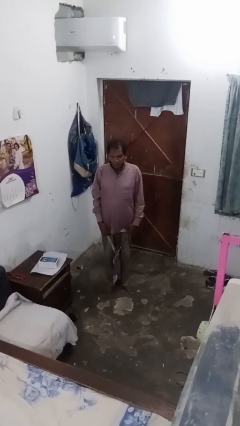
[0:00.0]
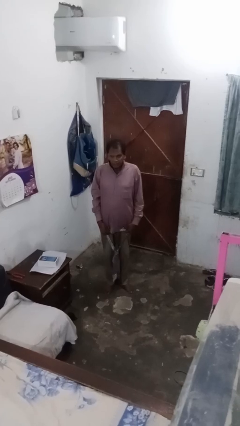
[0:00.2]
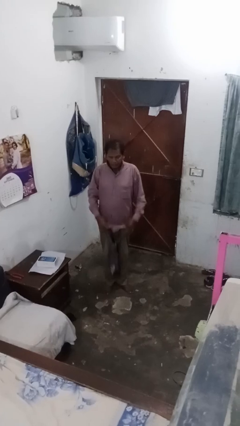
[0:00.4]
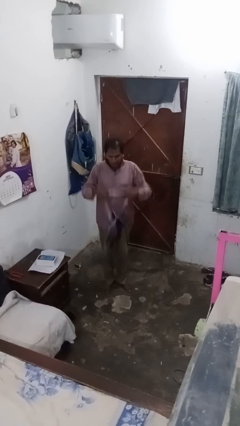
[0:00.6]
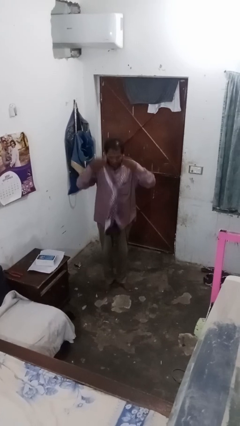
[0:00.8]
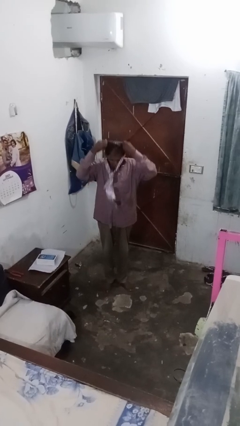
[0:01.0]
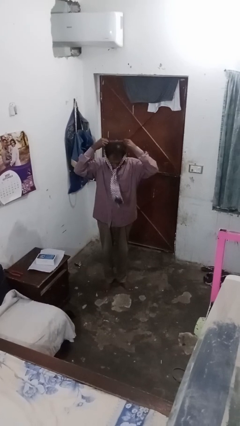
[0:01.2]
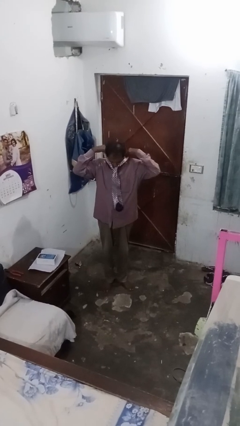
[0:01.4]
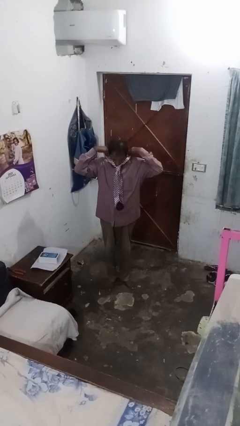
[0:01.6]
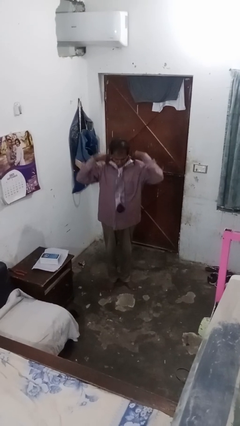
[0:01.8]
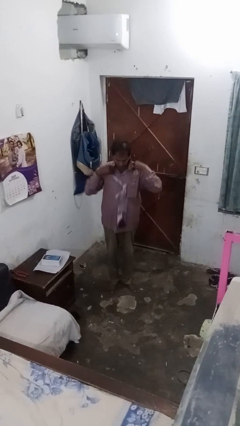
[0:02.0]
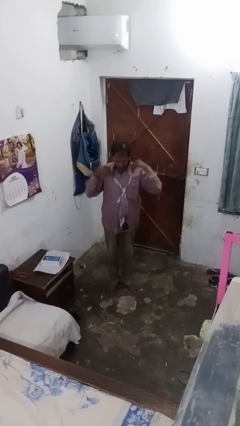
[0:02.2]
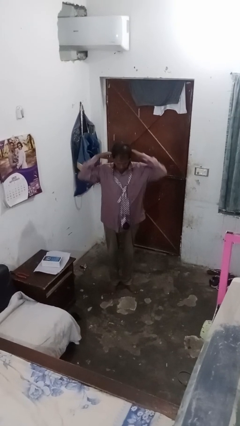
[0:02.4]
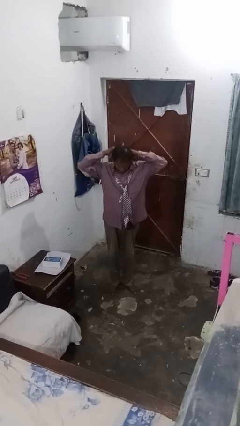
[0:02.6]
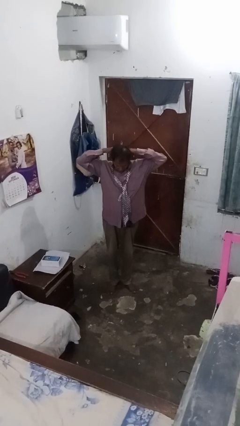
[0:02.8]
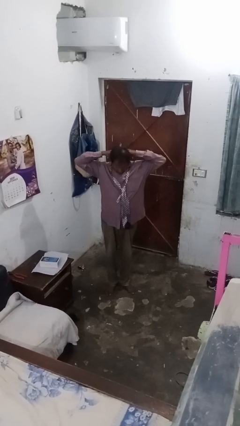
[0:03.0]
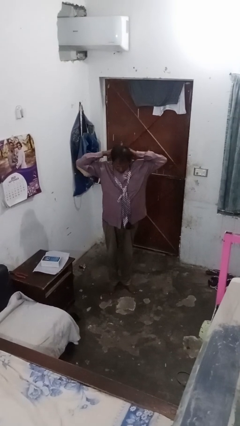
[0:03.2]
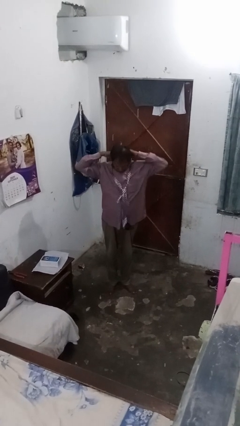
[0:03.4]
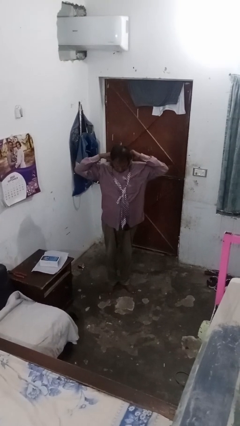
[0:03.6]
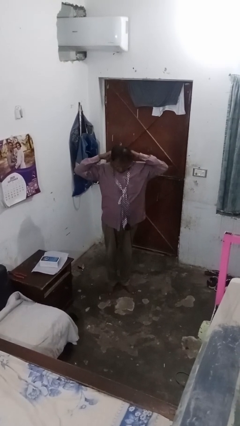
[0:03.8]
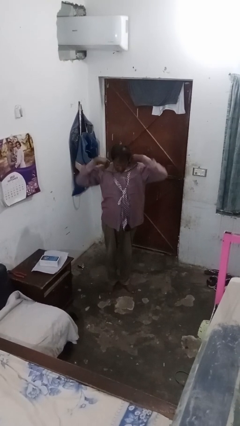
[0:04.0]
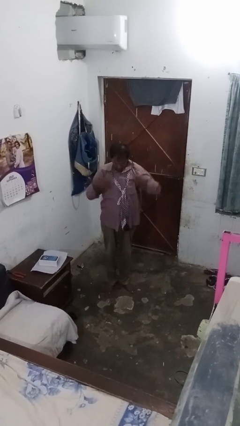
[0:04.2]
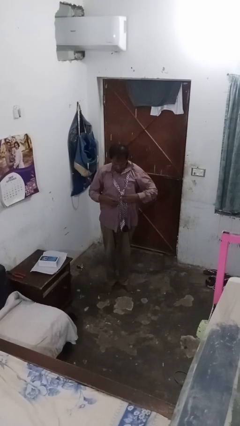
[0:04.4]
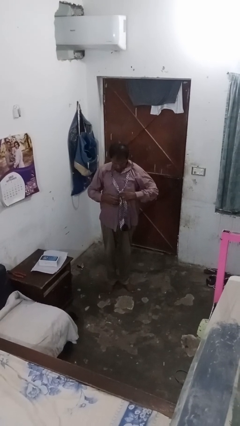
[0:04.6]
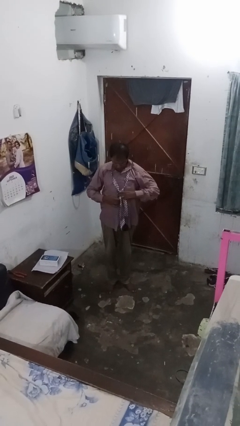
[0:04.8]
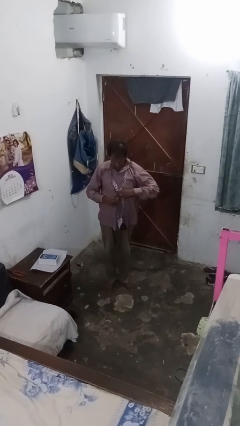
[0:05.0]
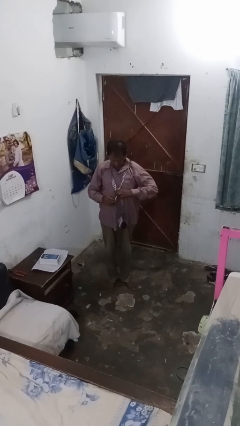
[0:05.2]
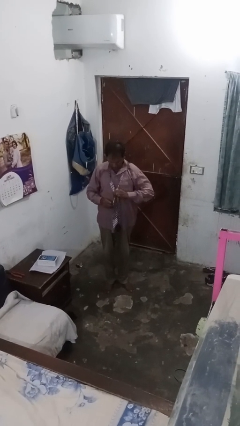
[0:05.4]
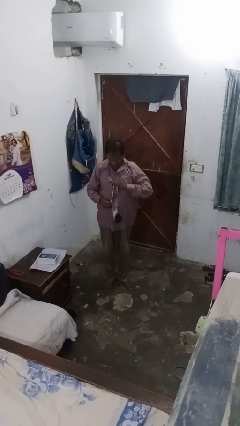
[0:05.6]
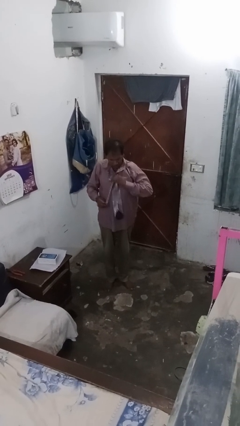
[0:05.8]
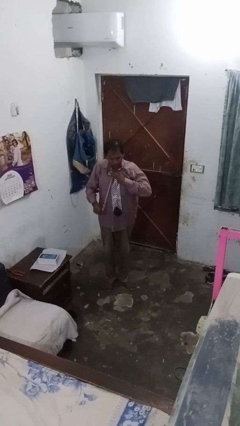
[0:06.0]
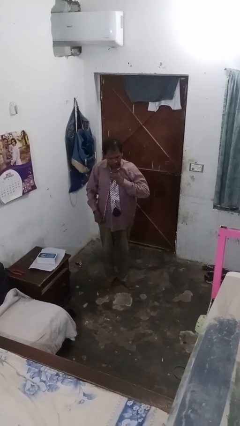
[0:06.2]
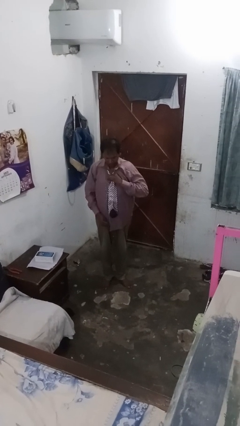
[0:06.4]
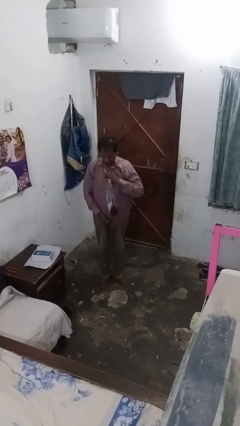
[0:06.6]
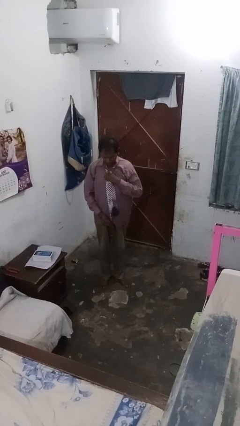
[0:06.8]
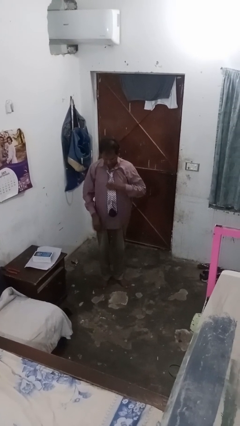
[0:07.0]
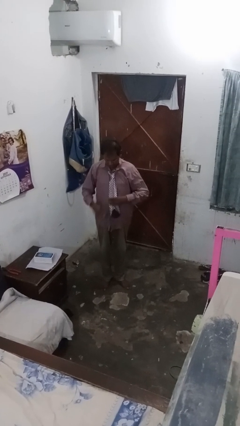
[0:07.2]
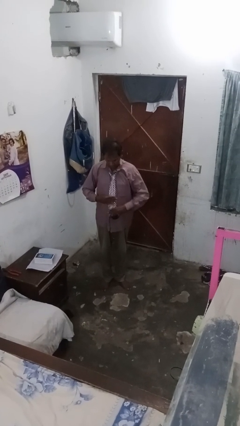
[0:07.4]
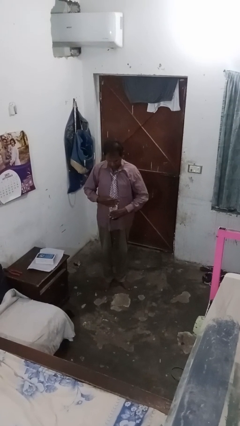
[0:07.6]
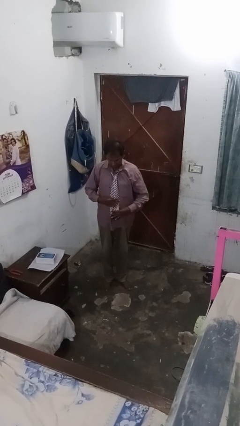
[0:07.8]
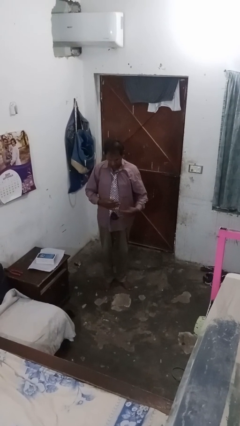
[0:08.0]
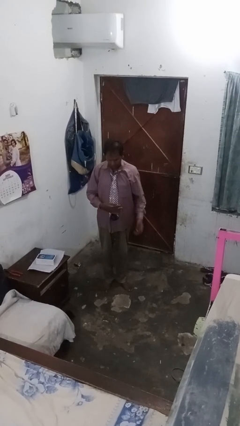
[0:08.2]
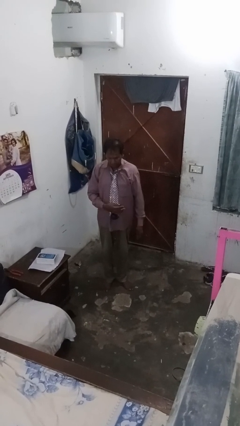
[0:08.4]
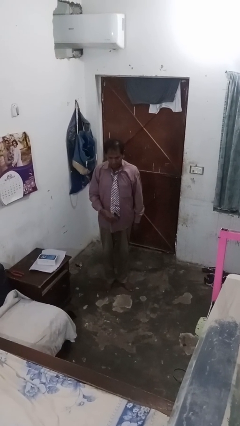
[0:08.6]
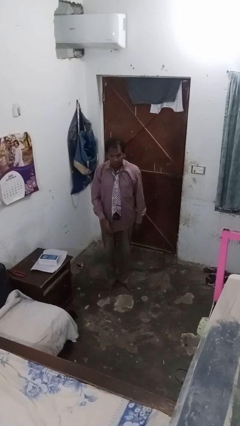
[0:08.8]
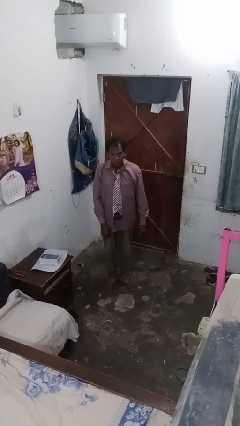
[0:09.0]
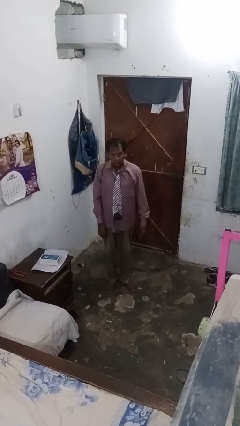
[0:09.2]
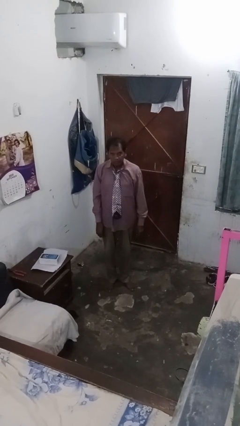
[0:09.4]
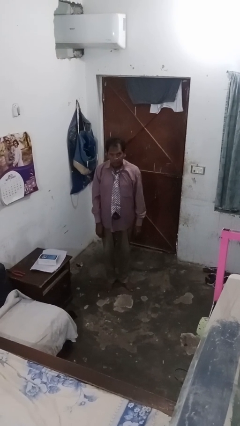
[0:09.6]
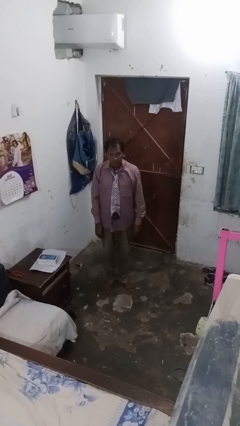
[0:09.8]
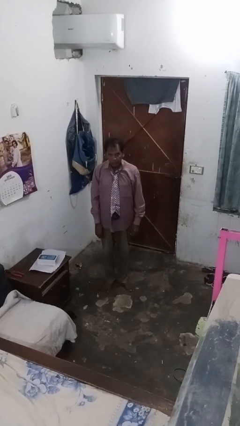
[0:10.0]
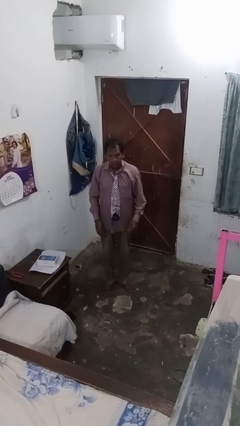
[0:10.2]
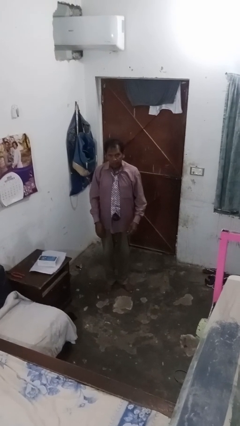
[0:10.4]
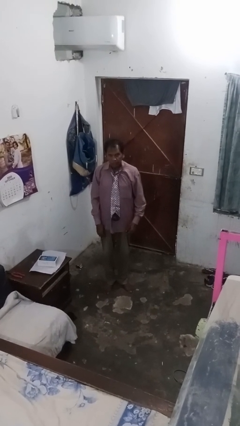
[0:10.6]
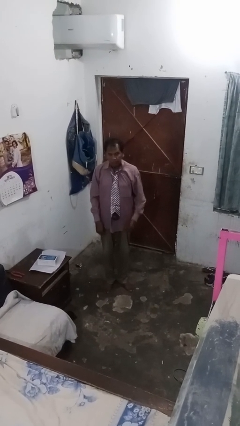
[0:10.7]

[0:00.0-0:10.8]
person puts on necktie

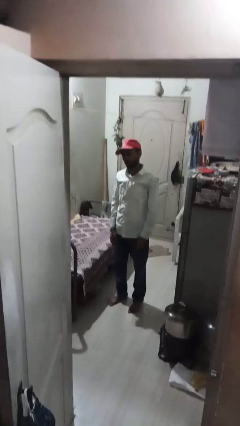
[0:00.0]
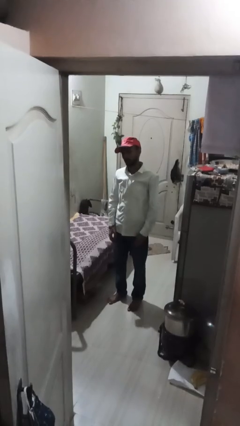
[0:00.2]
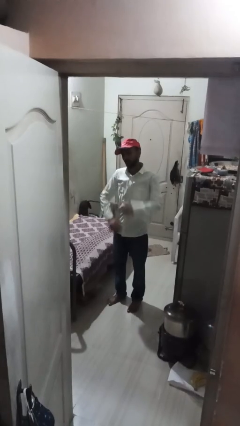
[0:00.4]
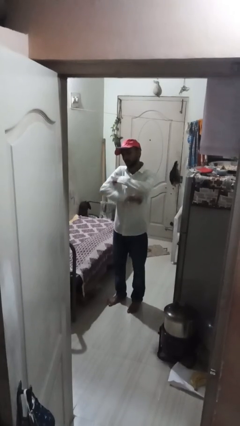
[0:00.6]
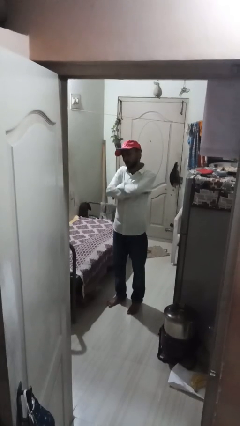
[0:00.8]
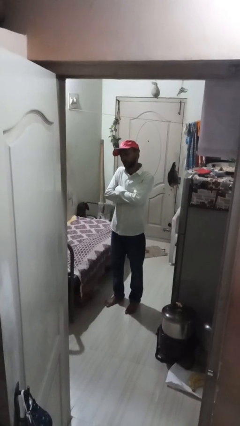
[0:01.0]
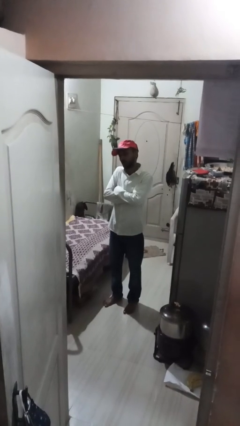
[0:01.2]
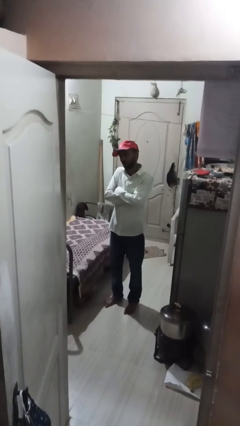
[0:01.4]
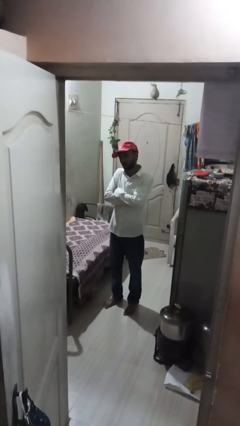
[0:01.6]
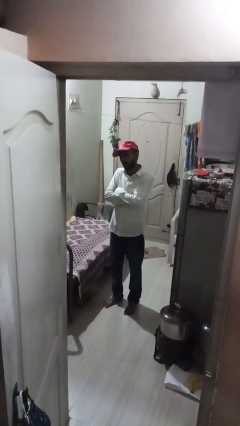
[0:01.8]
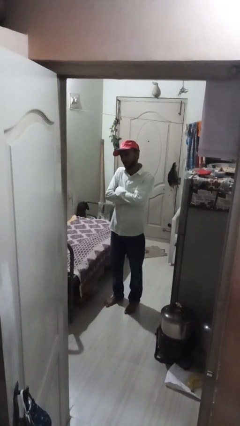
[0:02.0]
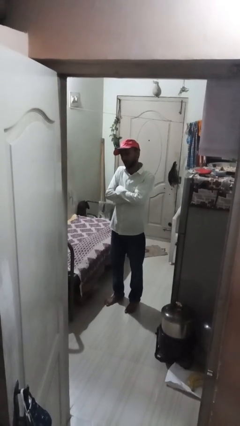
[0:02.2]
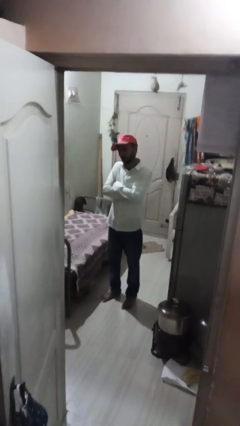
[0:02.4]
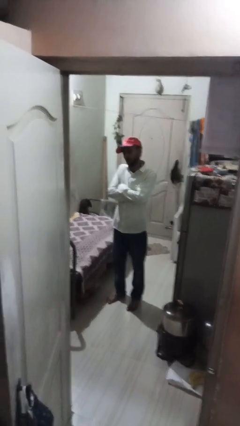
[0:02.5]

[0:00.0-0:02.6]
person crosses arms

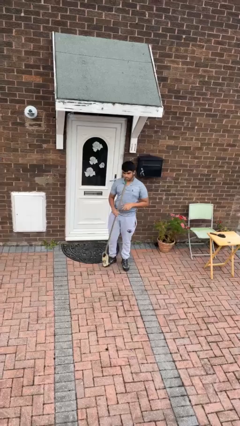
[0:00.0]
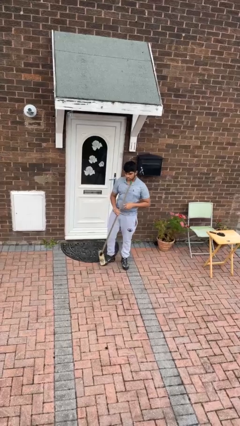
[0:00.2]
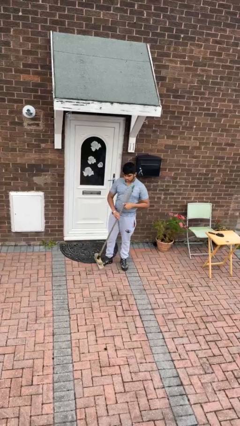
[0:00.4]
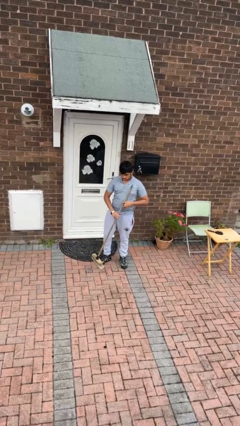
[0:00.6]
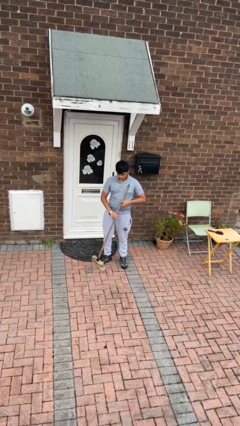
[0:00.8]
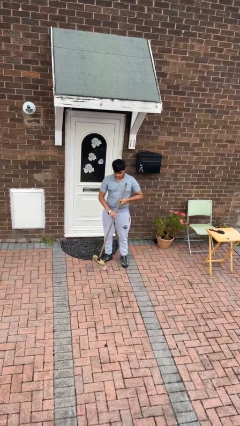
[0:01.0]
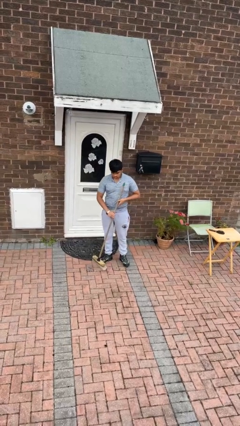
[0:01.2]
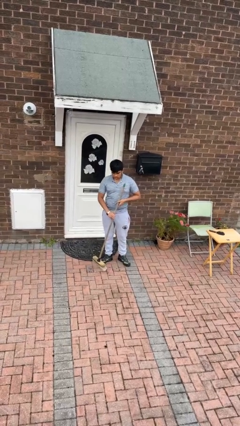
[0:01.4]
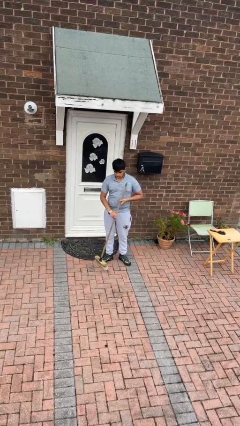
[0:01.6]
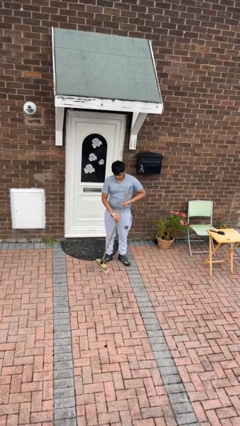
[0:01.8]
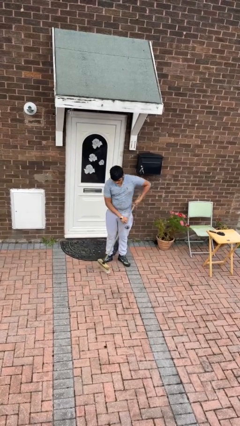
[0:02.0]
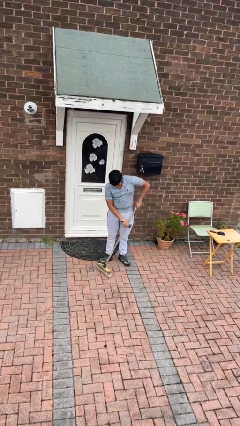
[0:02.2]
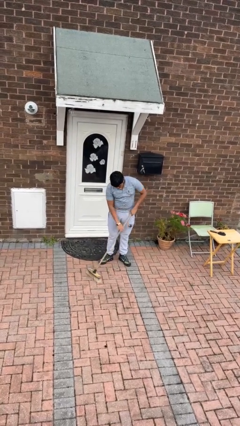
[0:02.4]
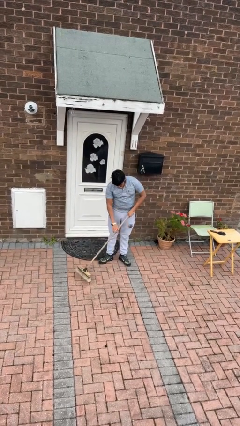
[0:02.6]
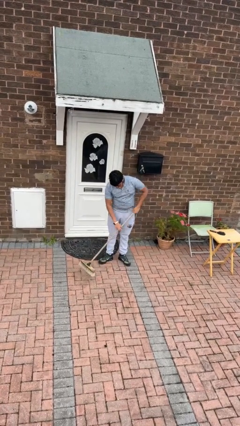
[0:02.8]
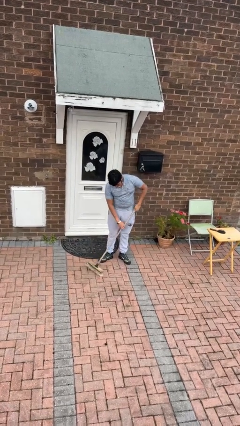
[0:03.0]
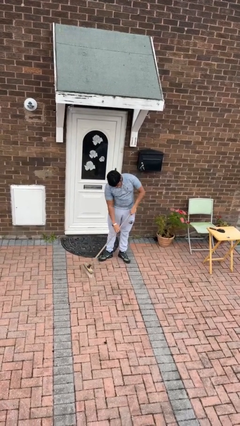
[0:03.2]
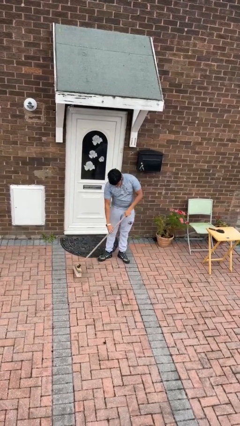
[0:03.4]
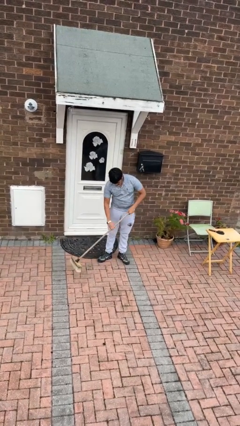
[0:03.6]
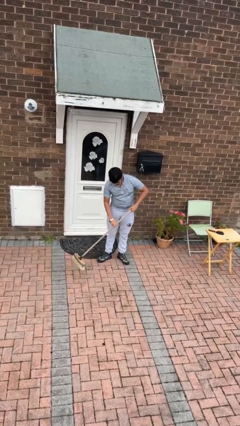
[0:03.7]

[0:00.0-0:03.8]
person sweeps floor

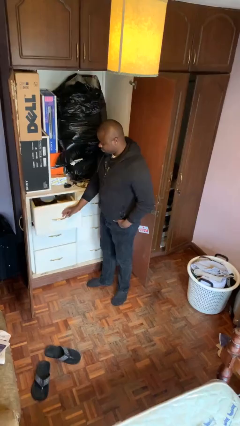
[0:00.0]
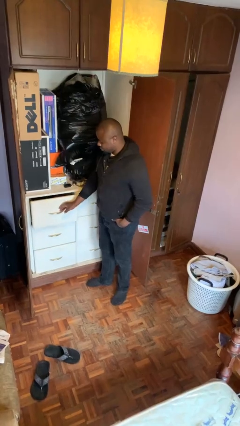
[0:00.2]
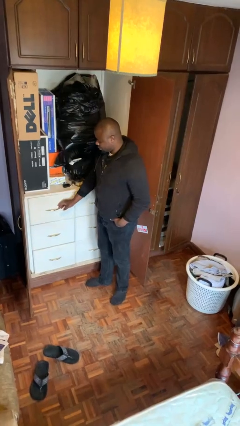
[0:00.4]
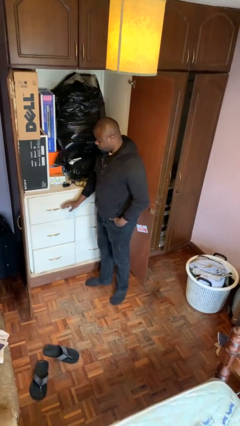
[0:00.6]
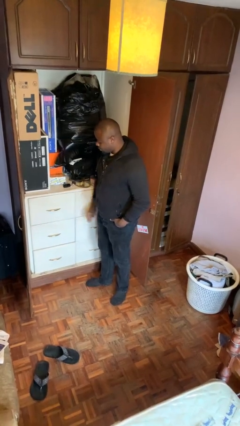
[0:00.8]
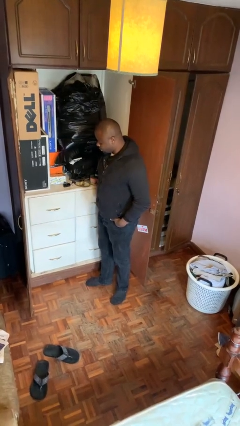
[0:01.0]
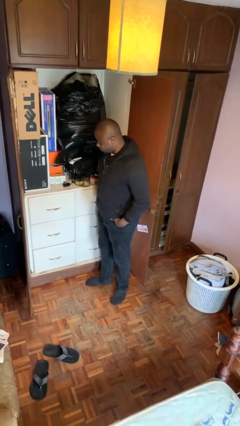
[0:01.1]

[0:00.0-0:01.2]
person closes dresser drawer
